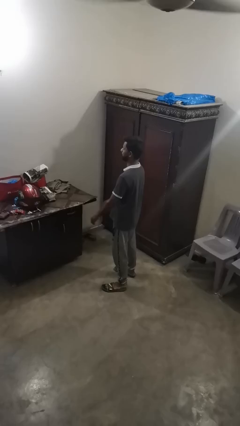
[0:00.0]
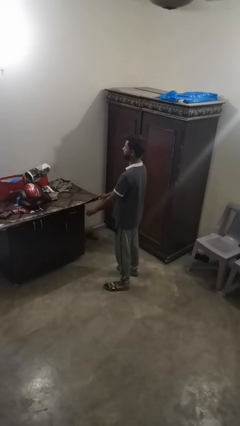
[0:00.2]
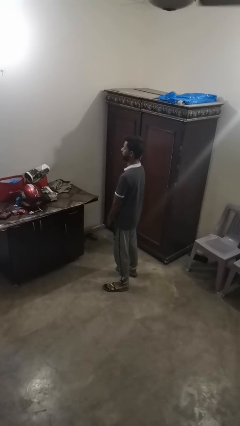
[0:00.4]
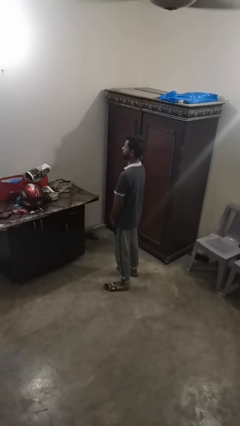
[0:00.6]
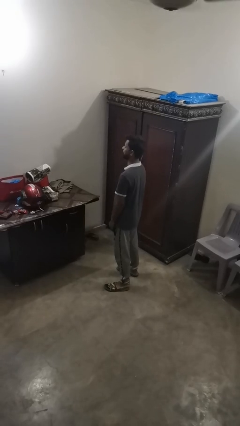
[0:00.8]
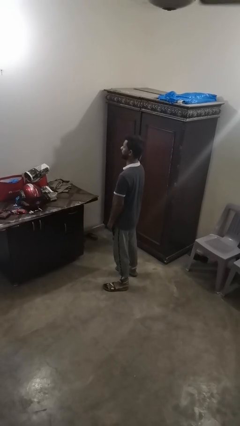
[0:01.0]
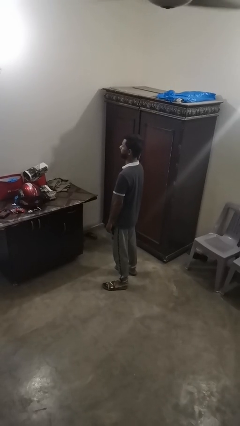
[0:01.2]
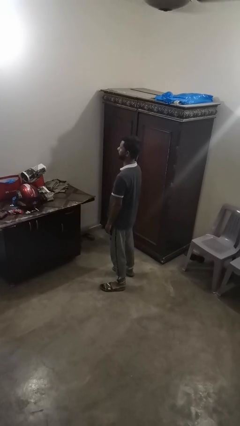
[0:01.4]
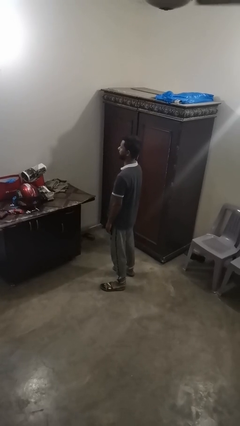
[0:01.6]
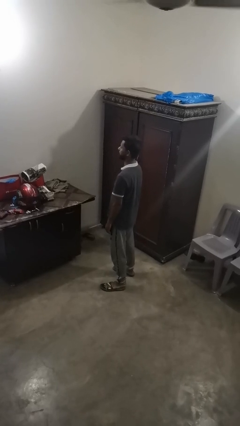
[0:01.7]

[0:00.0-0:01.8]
person slaps hands on thighs

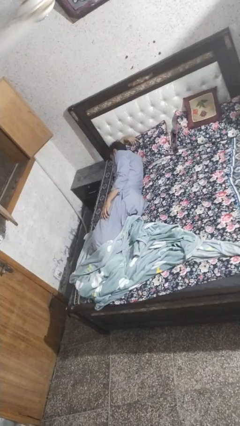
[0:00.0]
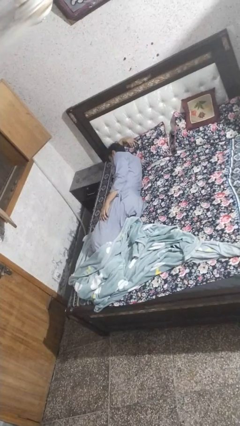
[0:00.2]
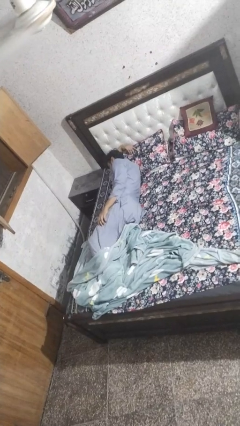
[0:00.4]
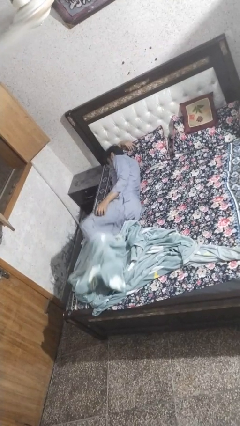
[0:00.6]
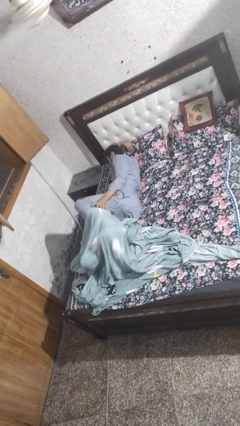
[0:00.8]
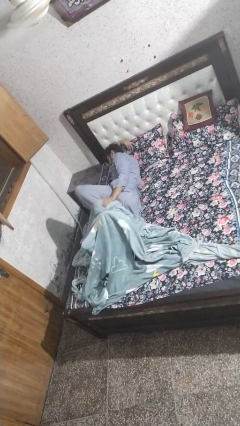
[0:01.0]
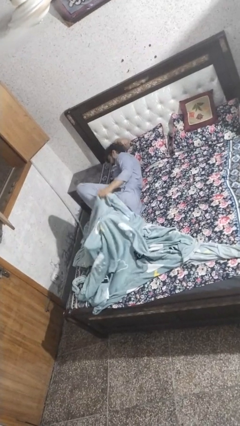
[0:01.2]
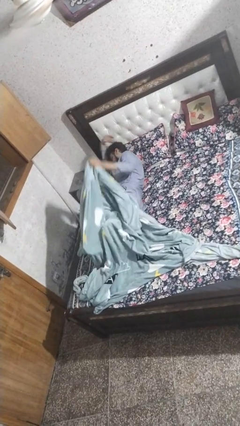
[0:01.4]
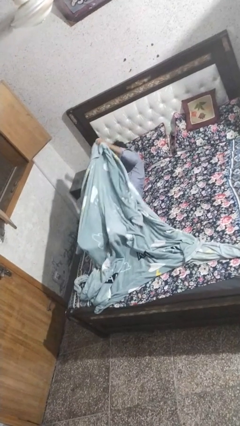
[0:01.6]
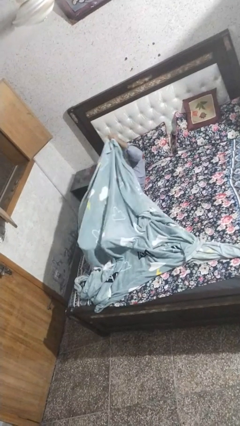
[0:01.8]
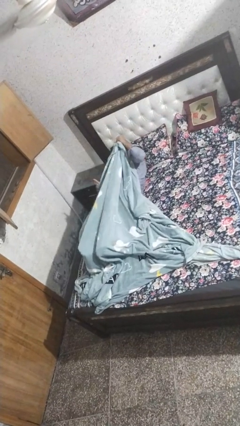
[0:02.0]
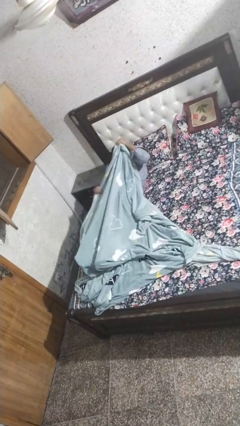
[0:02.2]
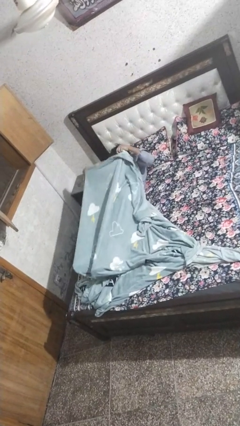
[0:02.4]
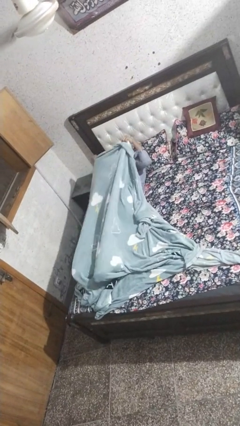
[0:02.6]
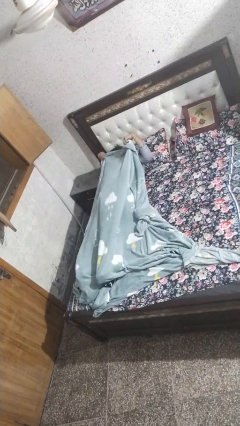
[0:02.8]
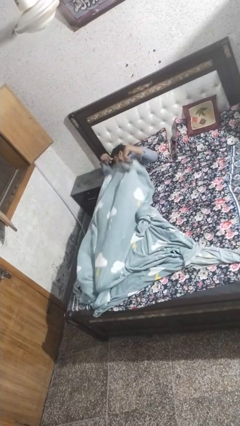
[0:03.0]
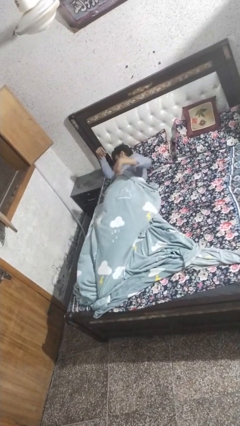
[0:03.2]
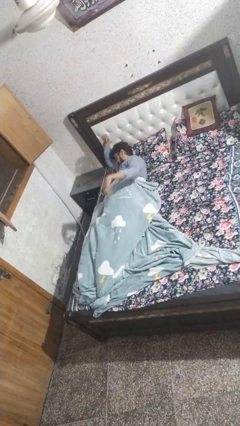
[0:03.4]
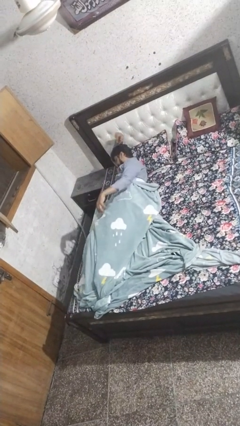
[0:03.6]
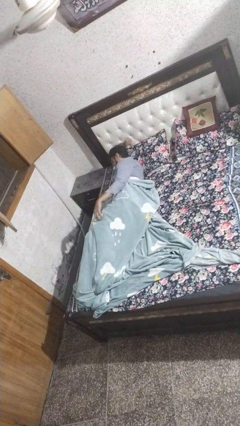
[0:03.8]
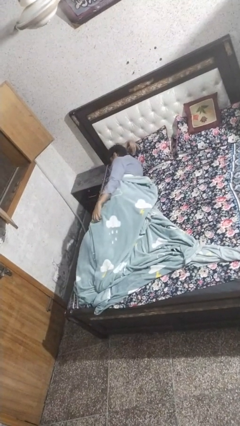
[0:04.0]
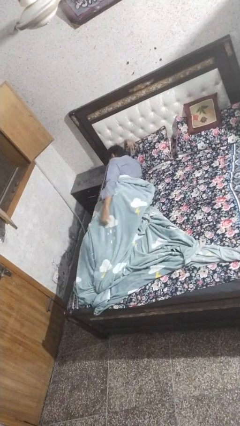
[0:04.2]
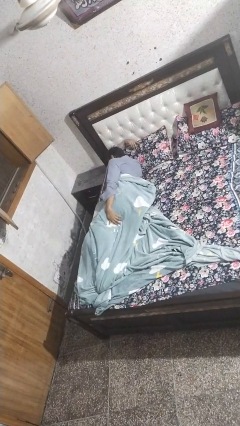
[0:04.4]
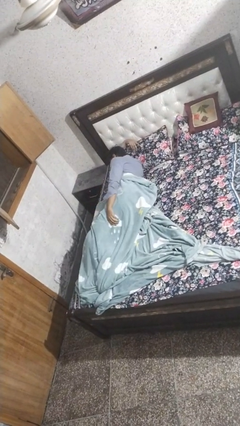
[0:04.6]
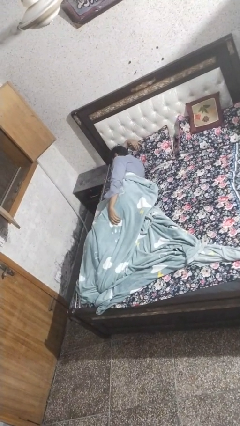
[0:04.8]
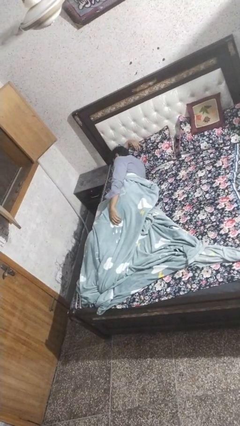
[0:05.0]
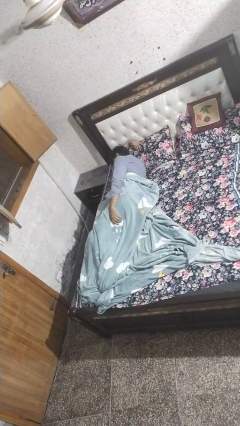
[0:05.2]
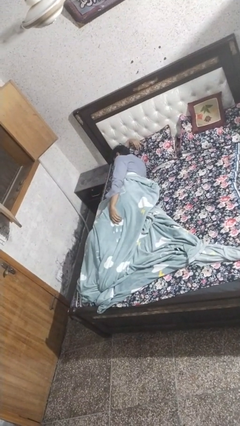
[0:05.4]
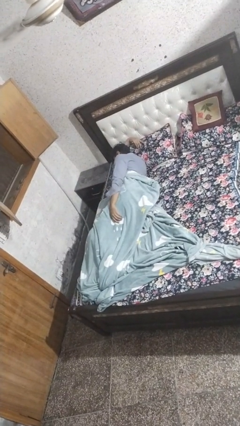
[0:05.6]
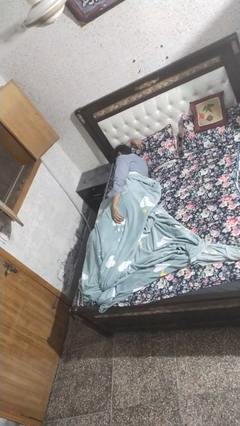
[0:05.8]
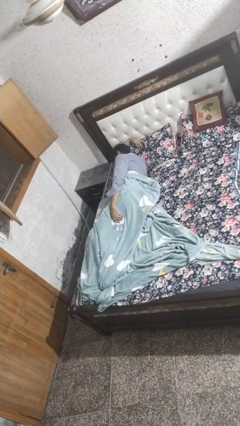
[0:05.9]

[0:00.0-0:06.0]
person covers with bedsheets

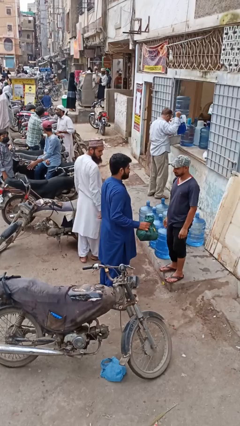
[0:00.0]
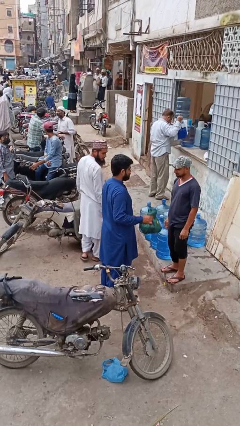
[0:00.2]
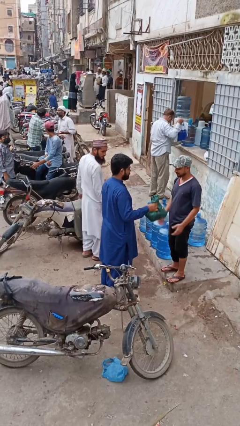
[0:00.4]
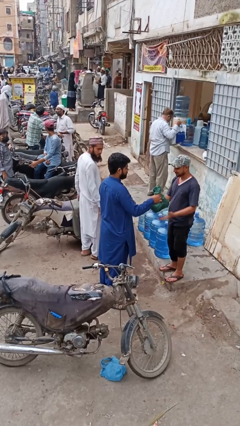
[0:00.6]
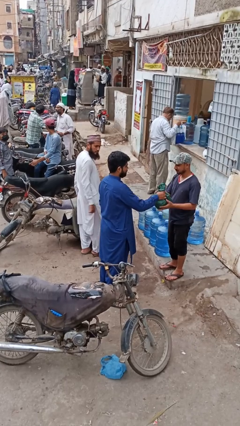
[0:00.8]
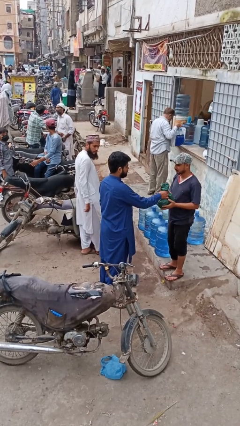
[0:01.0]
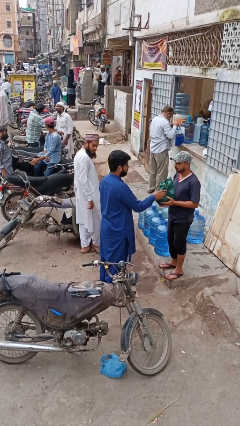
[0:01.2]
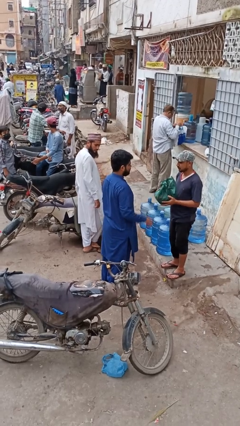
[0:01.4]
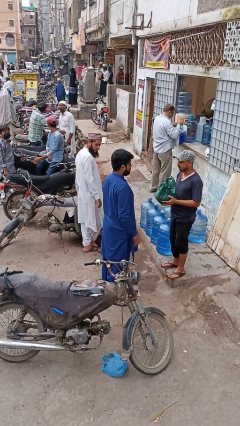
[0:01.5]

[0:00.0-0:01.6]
person transfers object to person

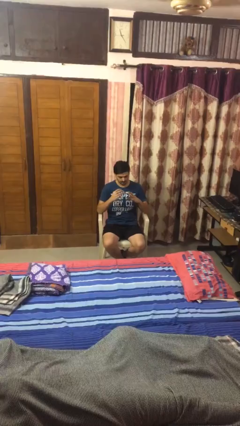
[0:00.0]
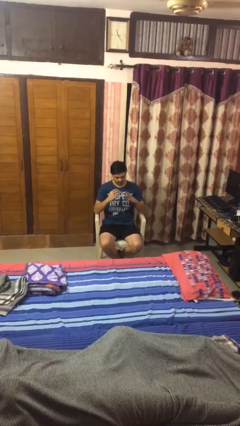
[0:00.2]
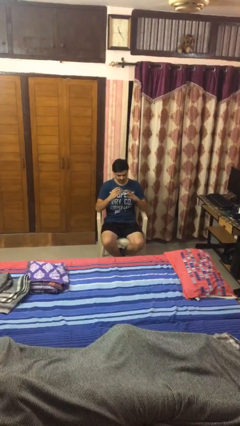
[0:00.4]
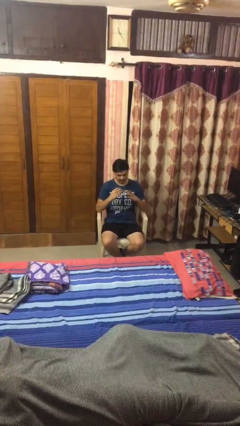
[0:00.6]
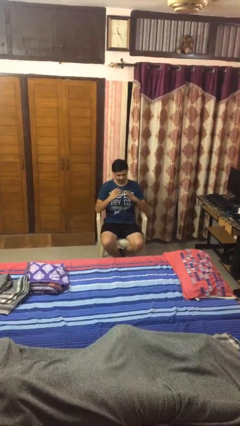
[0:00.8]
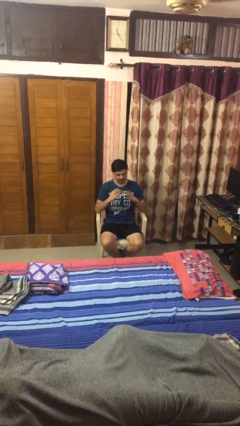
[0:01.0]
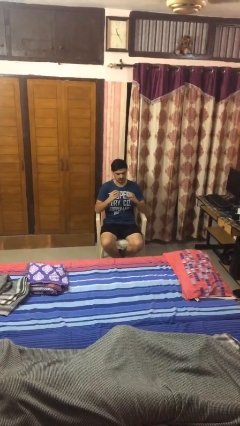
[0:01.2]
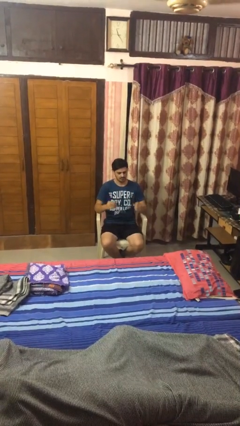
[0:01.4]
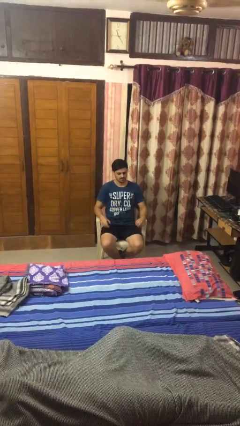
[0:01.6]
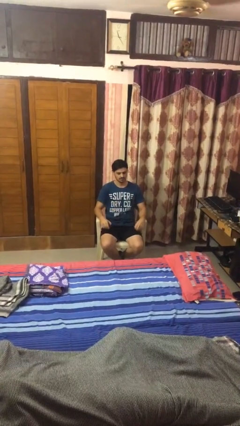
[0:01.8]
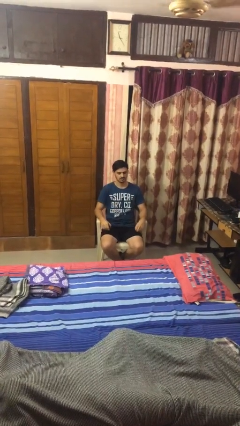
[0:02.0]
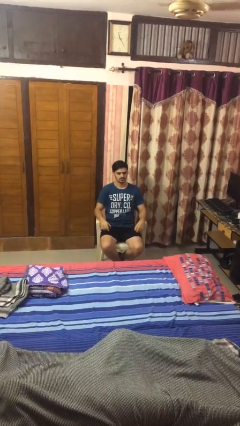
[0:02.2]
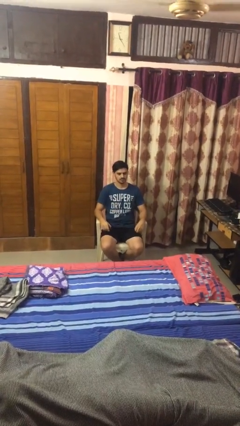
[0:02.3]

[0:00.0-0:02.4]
person clips fingernails

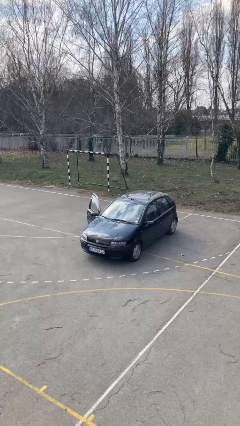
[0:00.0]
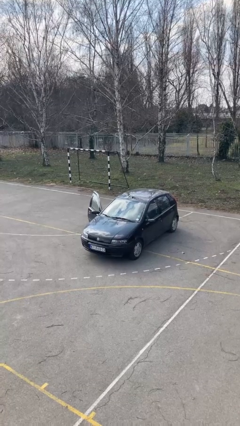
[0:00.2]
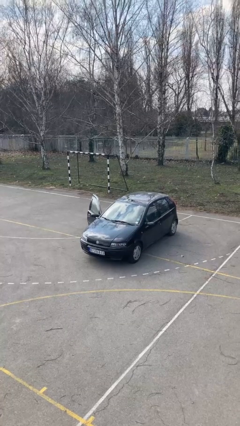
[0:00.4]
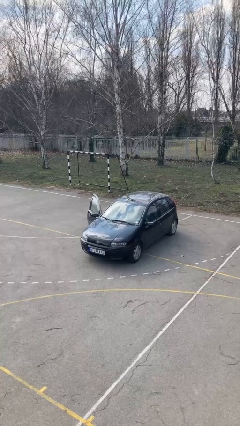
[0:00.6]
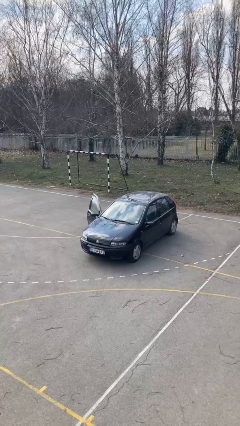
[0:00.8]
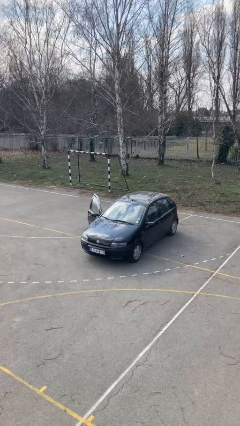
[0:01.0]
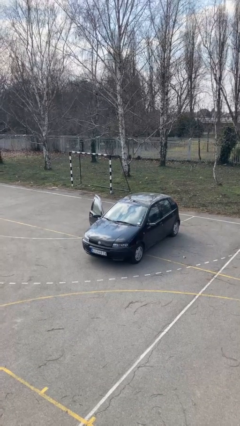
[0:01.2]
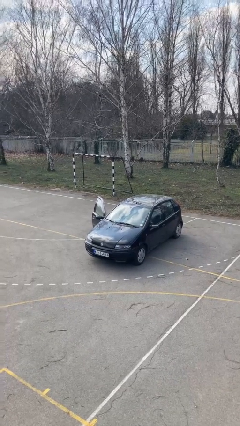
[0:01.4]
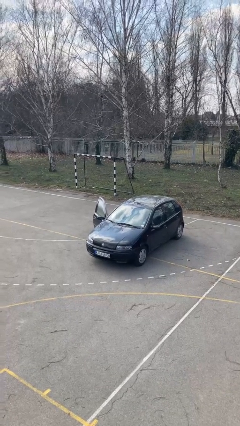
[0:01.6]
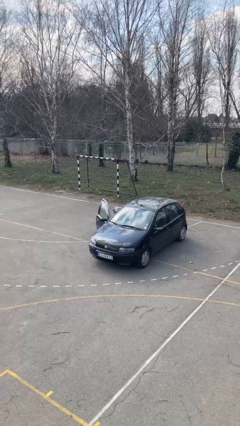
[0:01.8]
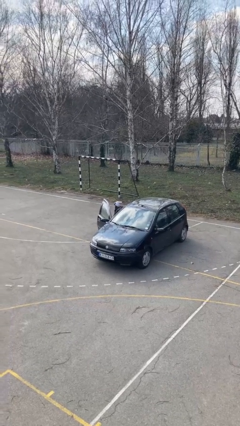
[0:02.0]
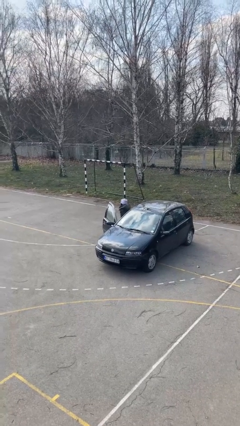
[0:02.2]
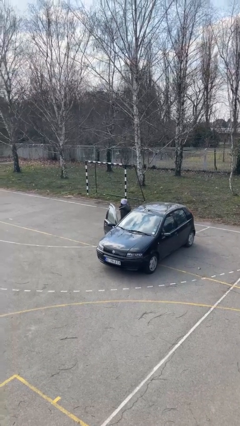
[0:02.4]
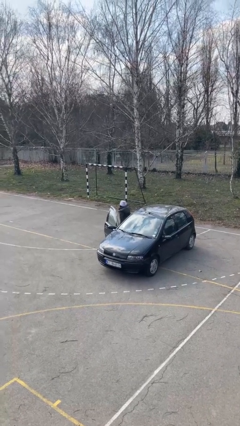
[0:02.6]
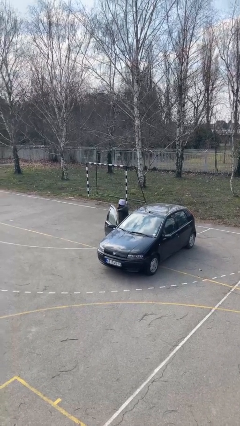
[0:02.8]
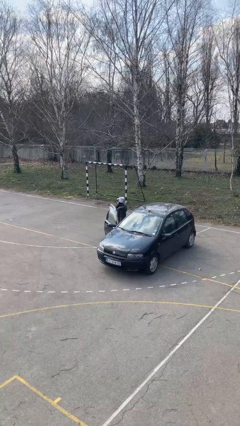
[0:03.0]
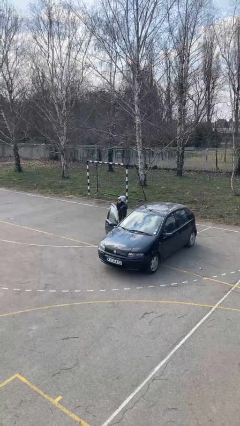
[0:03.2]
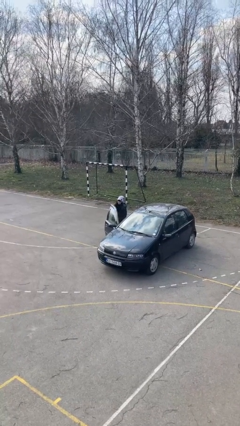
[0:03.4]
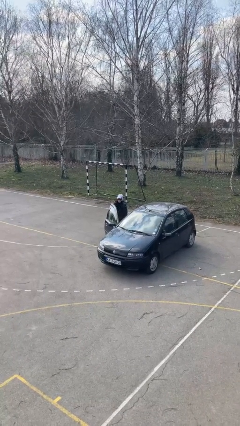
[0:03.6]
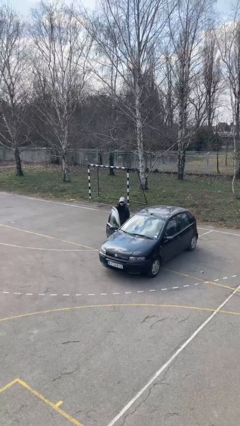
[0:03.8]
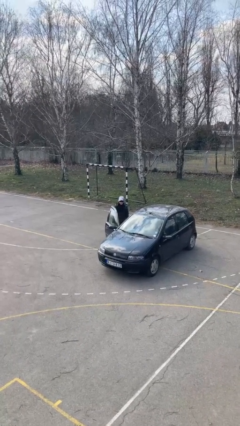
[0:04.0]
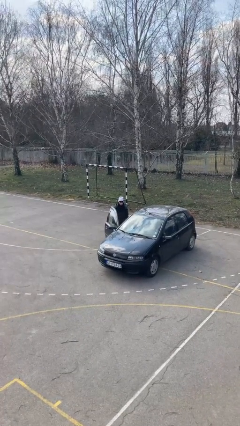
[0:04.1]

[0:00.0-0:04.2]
person exits car

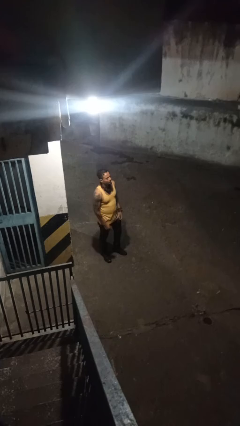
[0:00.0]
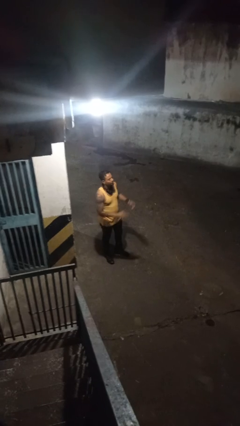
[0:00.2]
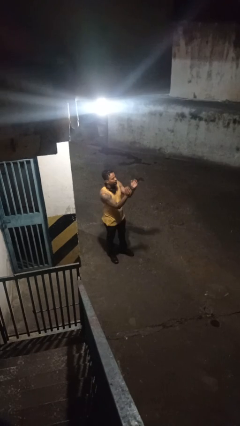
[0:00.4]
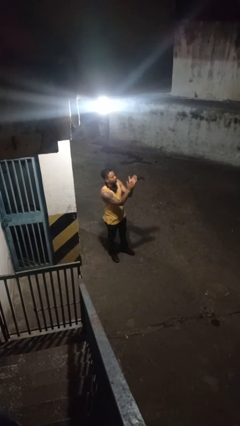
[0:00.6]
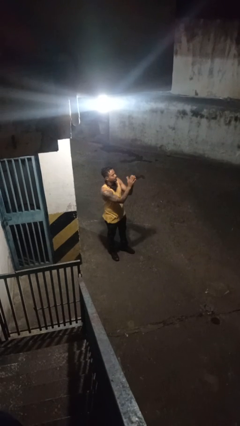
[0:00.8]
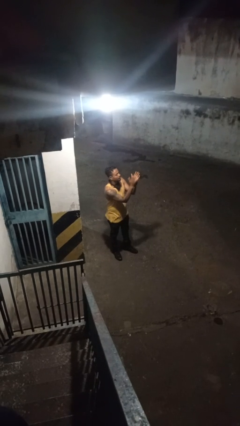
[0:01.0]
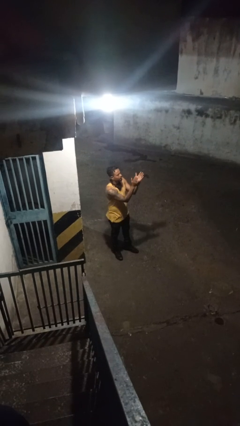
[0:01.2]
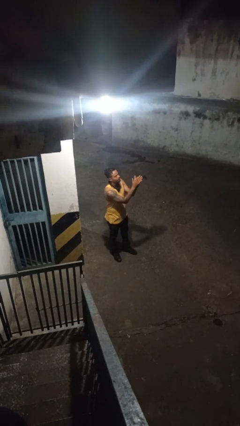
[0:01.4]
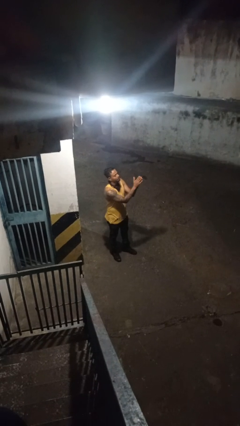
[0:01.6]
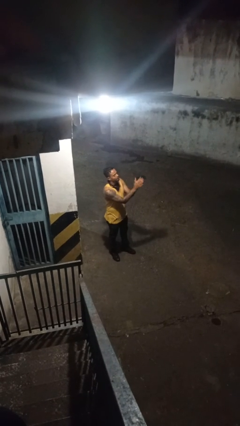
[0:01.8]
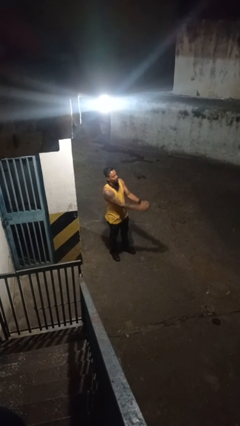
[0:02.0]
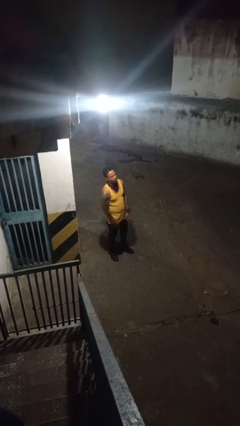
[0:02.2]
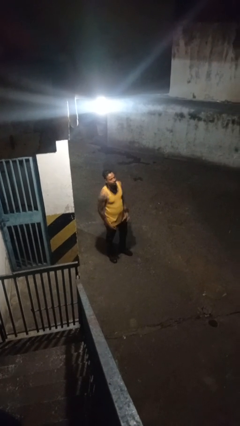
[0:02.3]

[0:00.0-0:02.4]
person claps hands
